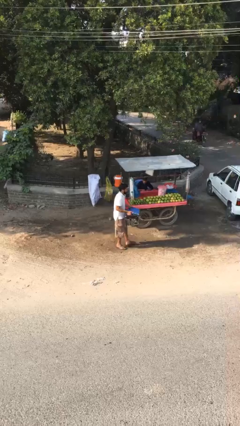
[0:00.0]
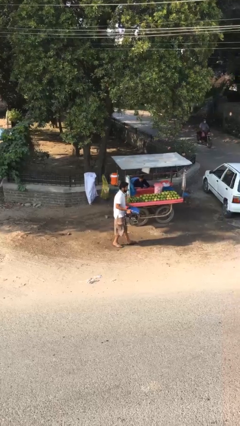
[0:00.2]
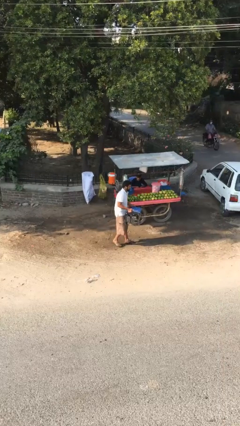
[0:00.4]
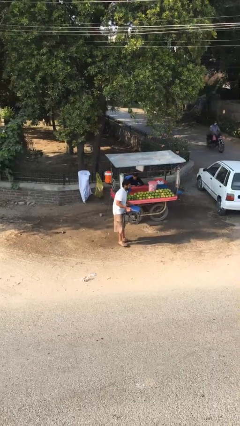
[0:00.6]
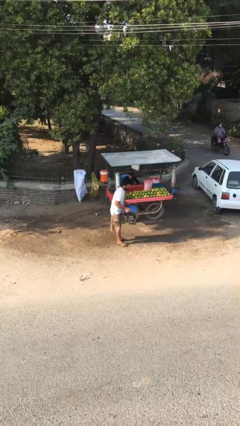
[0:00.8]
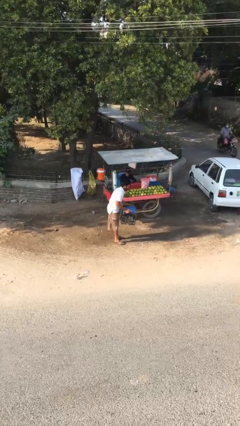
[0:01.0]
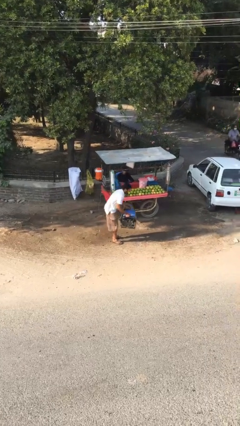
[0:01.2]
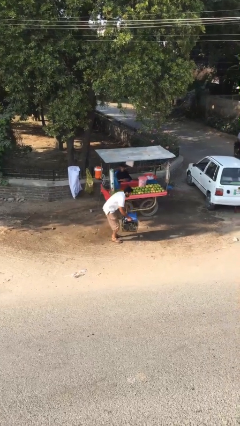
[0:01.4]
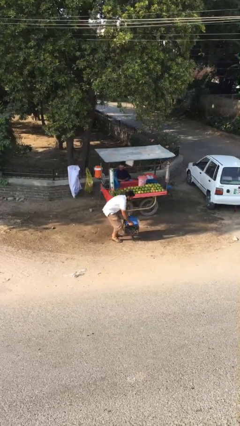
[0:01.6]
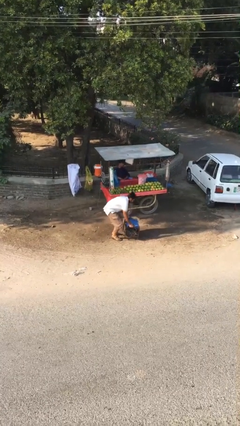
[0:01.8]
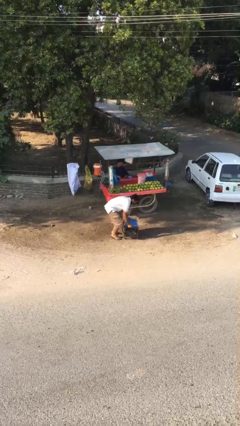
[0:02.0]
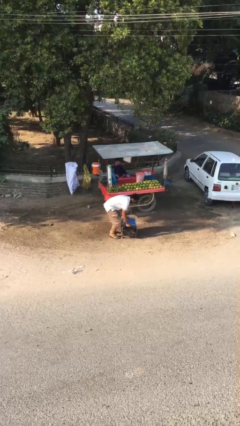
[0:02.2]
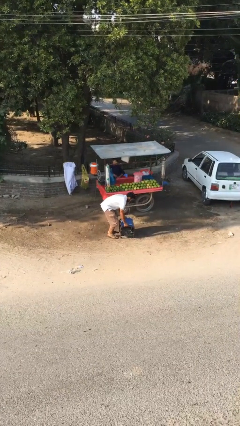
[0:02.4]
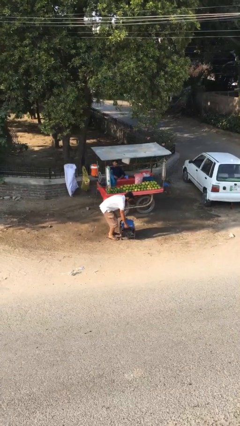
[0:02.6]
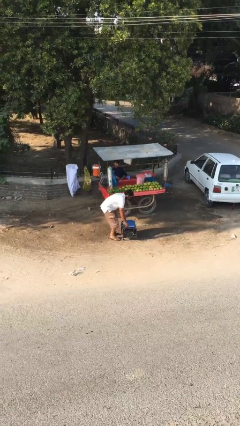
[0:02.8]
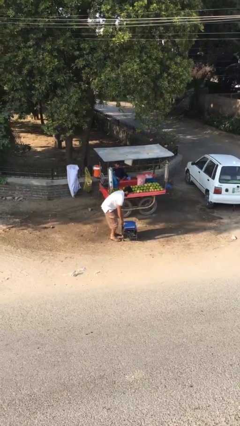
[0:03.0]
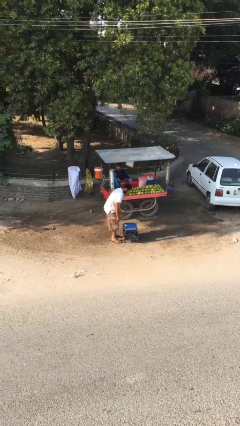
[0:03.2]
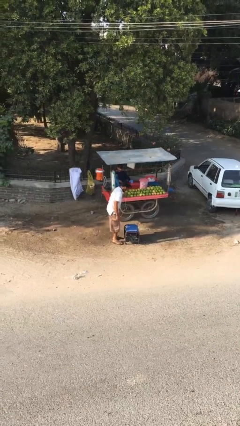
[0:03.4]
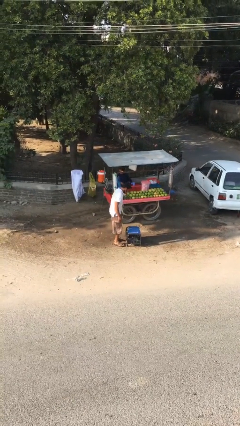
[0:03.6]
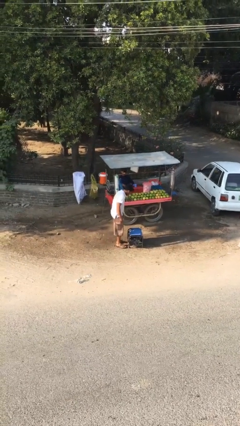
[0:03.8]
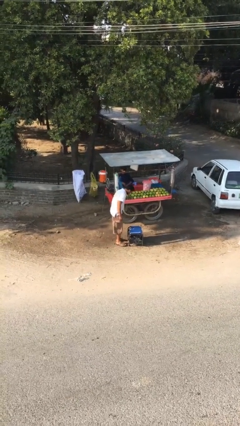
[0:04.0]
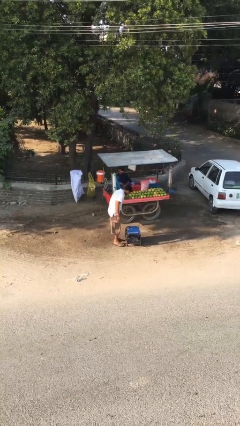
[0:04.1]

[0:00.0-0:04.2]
person puts down object on floor

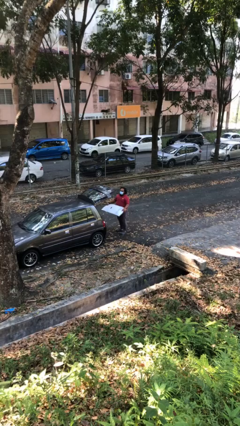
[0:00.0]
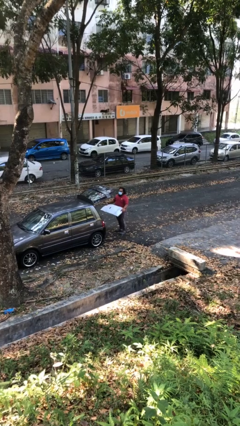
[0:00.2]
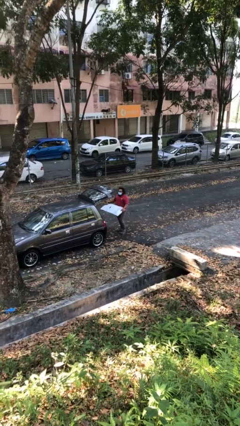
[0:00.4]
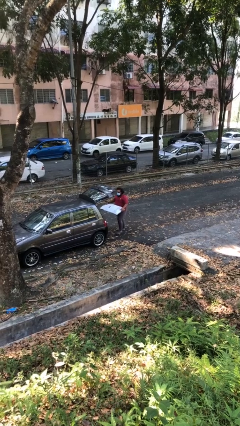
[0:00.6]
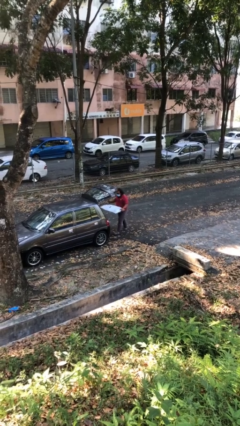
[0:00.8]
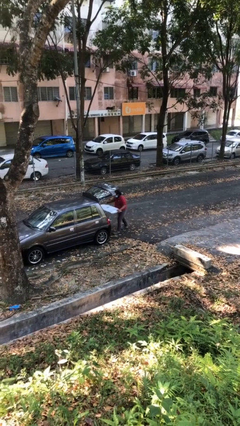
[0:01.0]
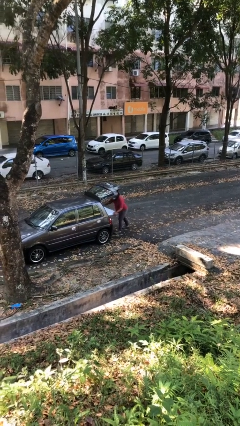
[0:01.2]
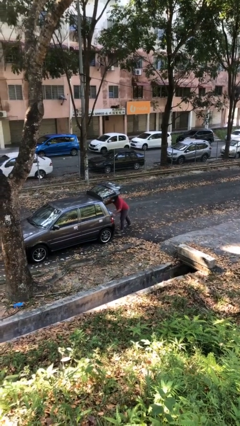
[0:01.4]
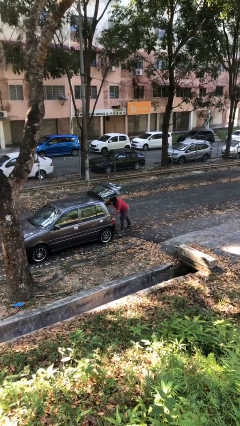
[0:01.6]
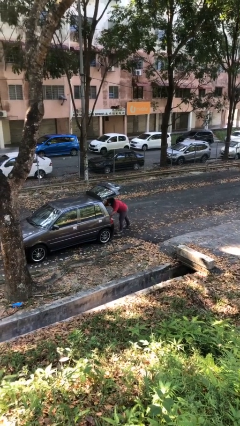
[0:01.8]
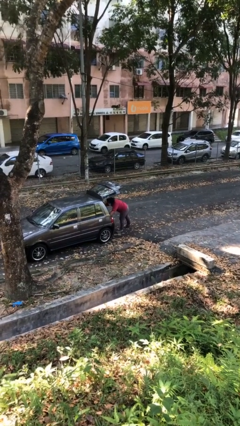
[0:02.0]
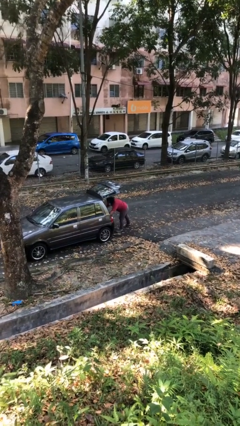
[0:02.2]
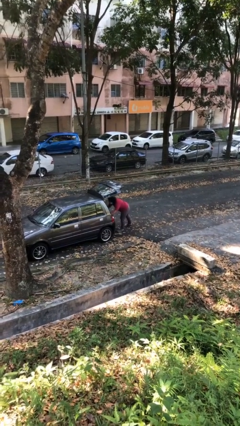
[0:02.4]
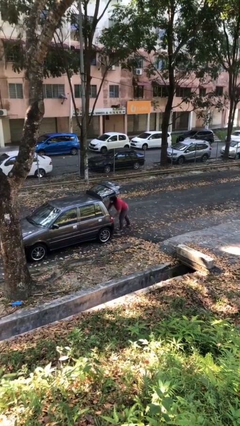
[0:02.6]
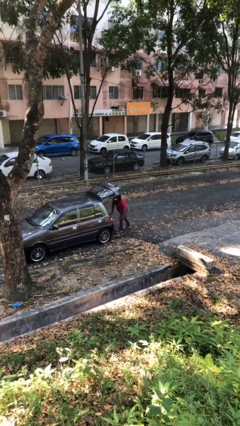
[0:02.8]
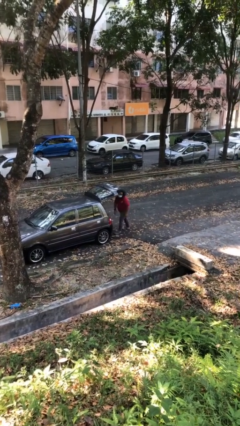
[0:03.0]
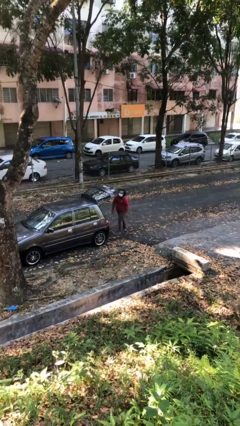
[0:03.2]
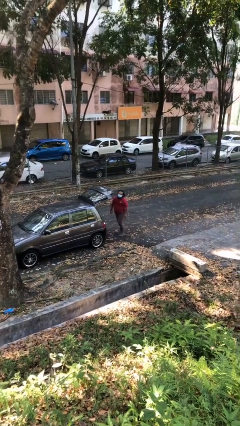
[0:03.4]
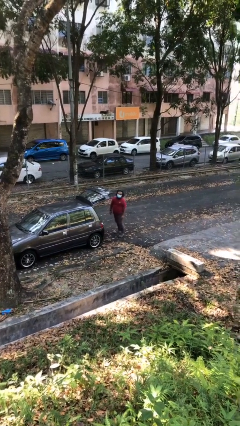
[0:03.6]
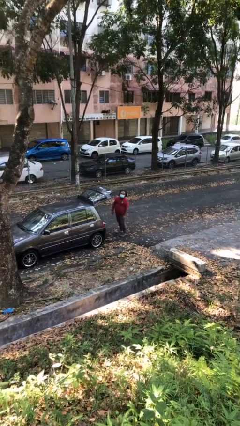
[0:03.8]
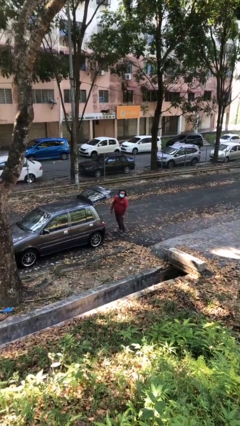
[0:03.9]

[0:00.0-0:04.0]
person loads car

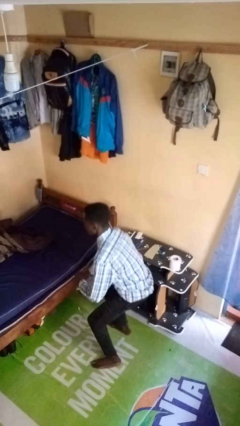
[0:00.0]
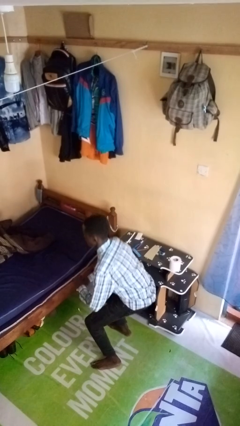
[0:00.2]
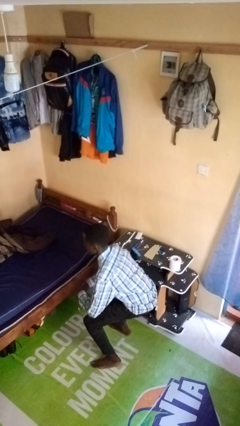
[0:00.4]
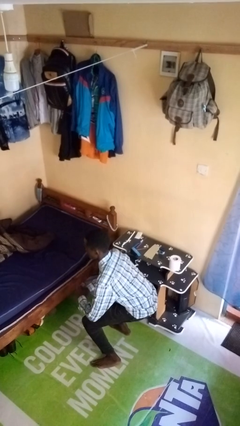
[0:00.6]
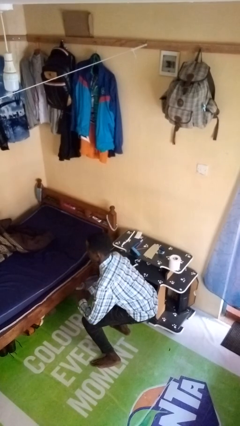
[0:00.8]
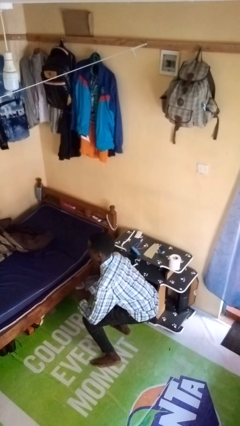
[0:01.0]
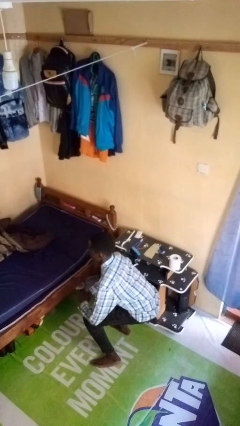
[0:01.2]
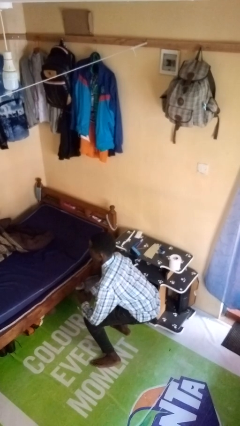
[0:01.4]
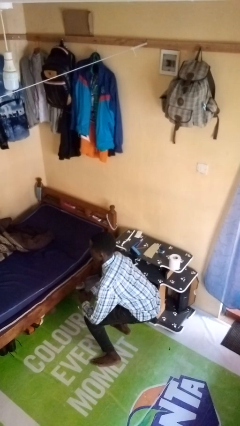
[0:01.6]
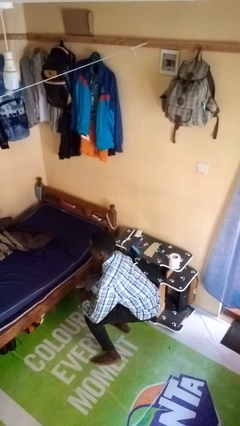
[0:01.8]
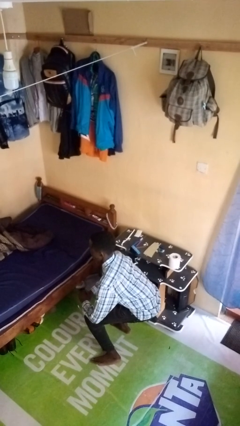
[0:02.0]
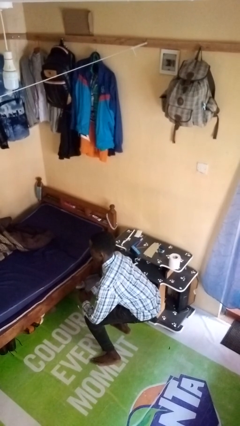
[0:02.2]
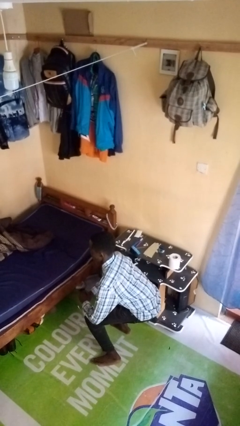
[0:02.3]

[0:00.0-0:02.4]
person squats

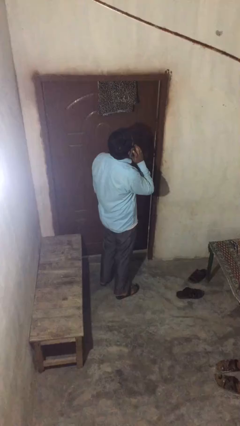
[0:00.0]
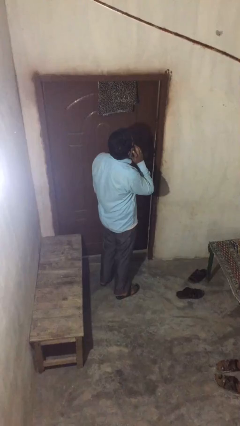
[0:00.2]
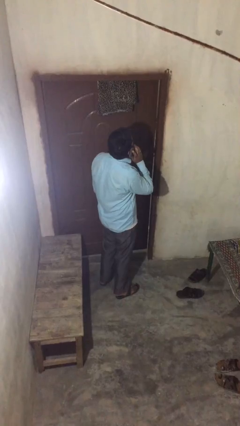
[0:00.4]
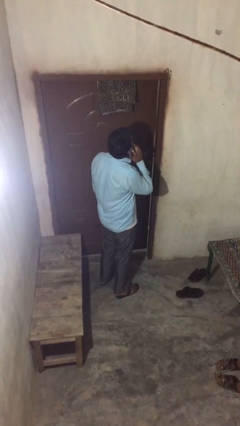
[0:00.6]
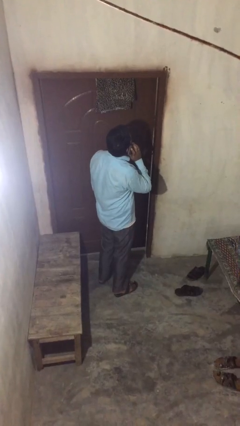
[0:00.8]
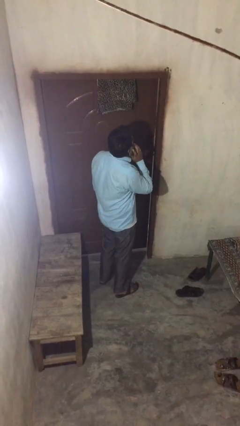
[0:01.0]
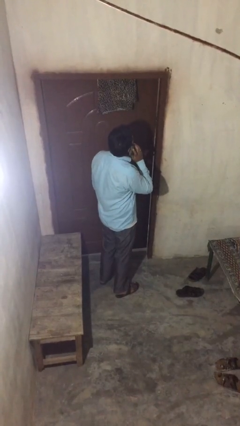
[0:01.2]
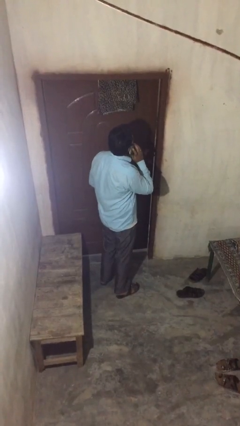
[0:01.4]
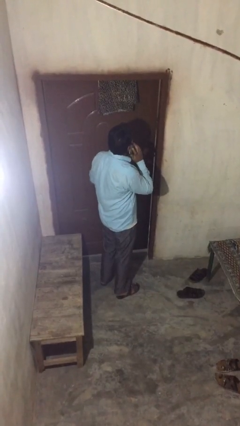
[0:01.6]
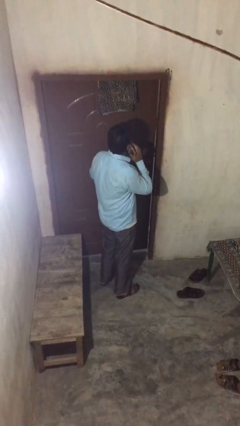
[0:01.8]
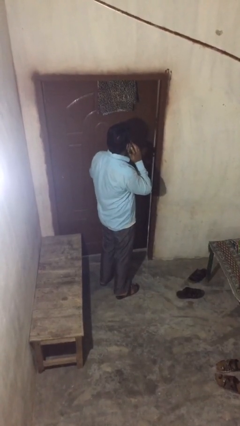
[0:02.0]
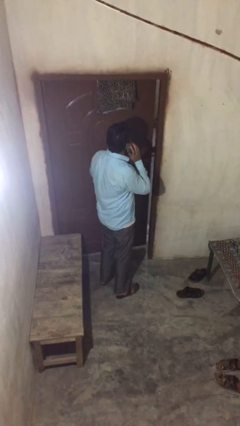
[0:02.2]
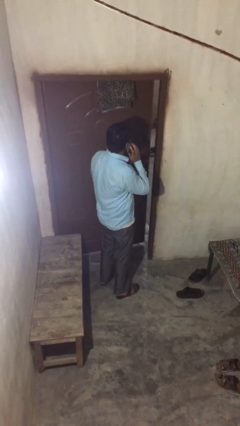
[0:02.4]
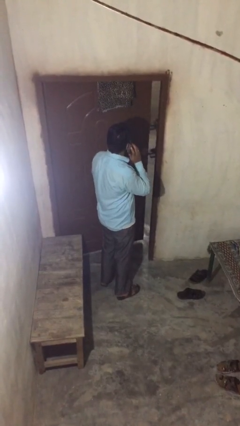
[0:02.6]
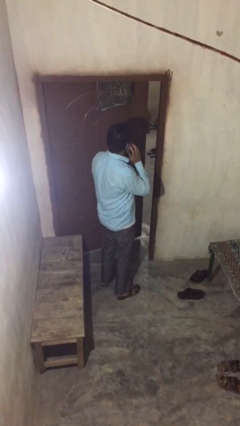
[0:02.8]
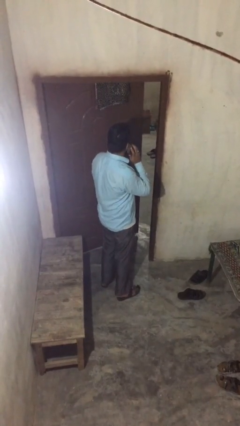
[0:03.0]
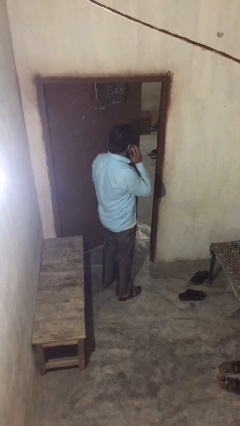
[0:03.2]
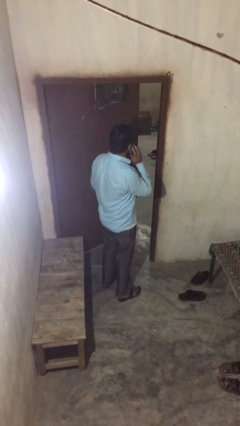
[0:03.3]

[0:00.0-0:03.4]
person opens facility door

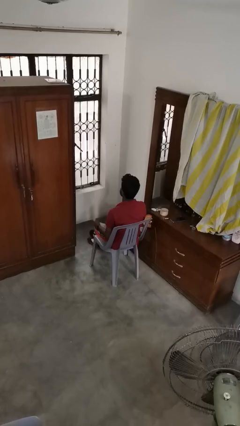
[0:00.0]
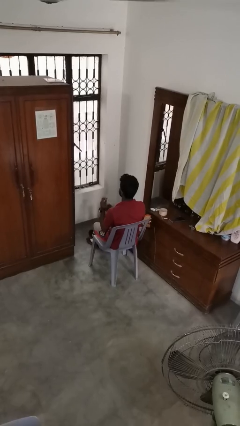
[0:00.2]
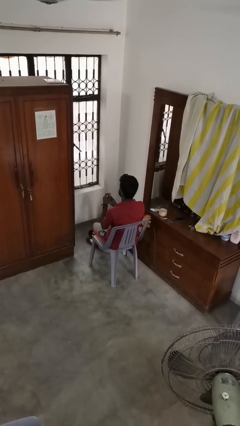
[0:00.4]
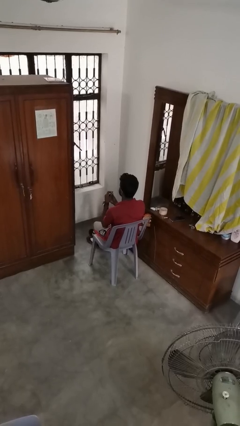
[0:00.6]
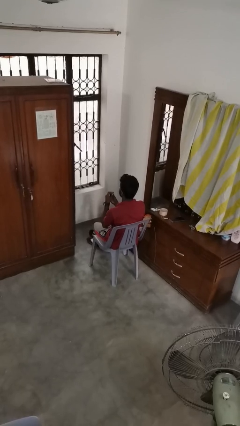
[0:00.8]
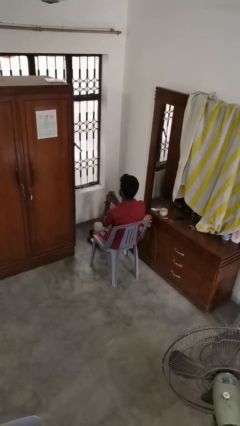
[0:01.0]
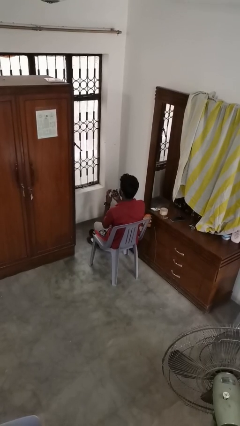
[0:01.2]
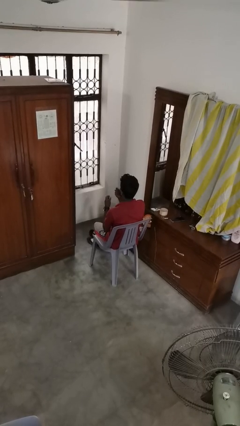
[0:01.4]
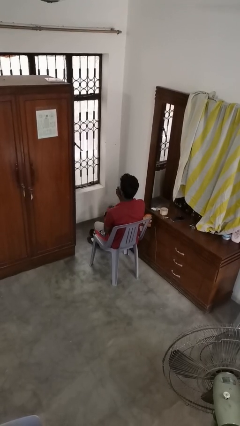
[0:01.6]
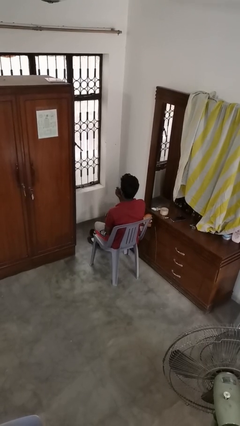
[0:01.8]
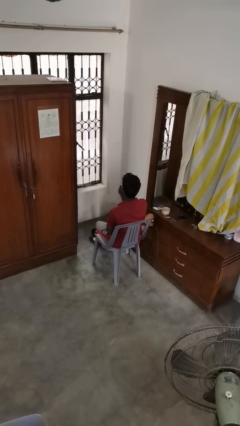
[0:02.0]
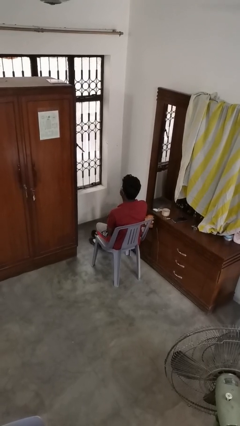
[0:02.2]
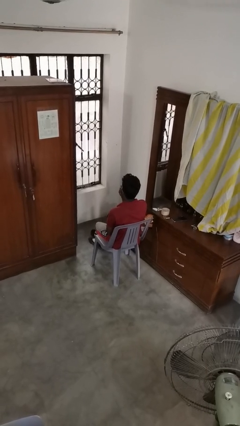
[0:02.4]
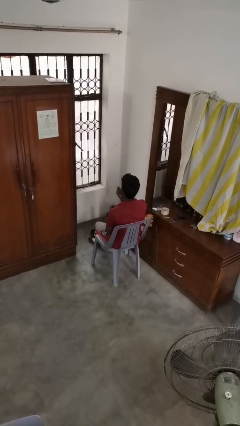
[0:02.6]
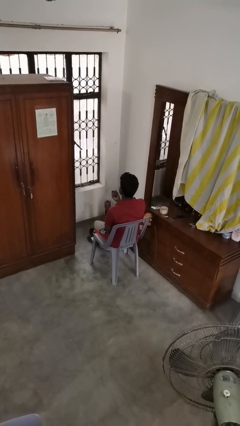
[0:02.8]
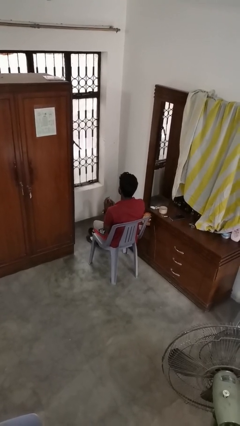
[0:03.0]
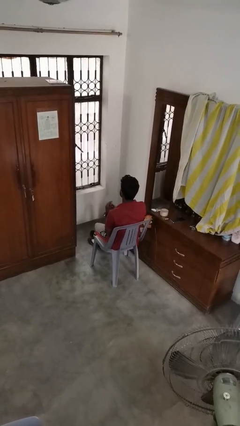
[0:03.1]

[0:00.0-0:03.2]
person applies lip makeup

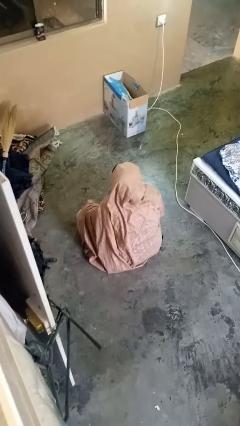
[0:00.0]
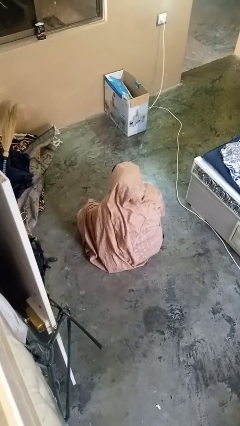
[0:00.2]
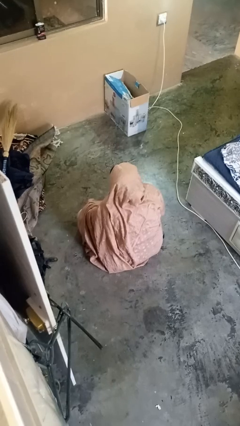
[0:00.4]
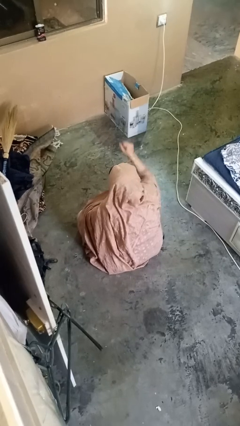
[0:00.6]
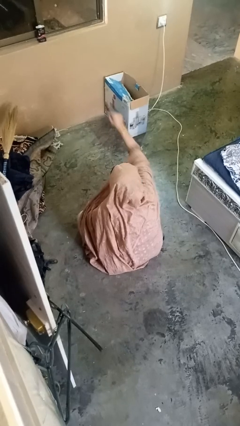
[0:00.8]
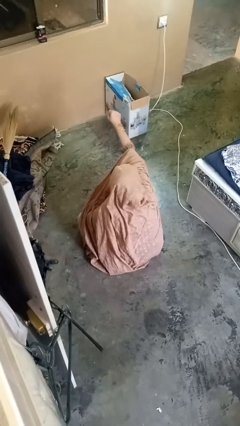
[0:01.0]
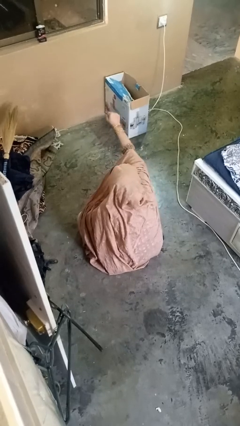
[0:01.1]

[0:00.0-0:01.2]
person punches
